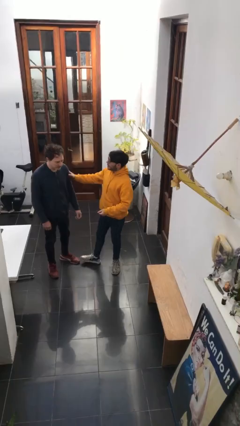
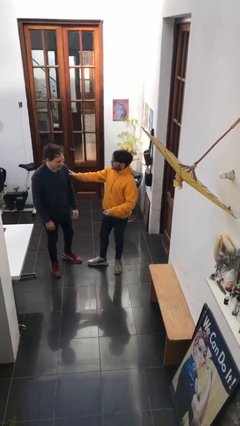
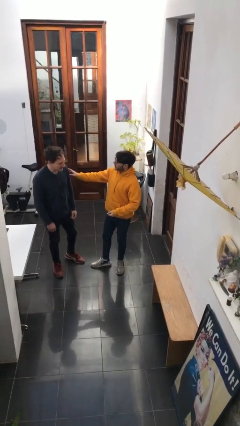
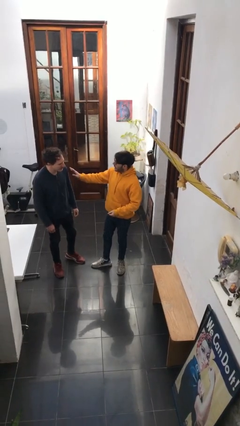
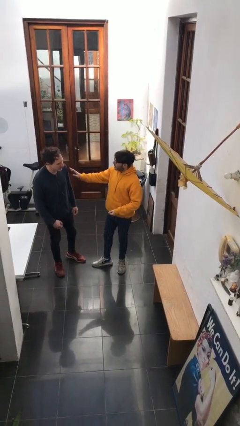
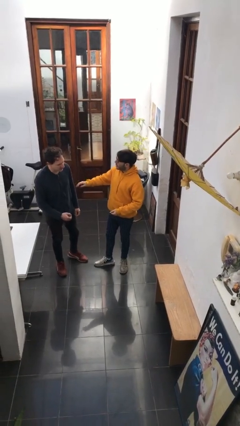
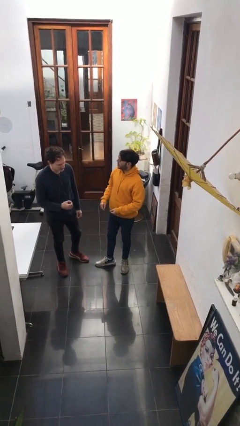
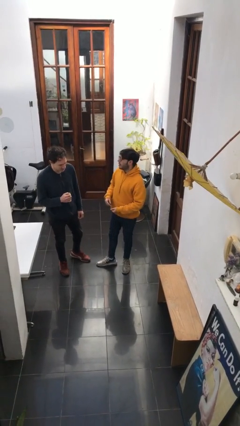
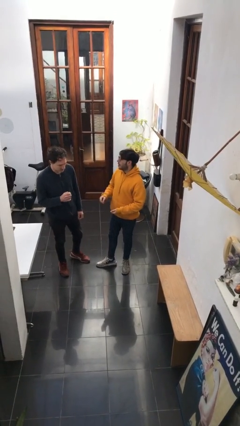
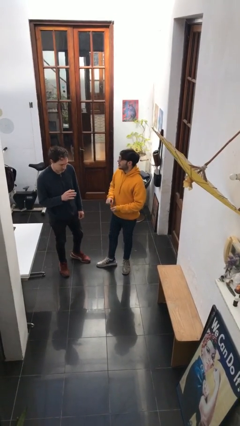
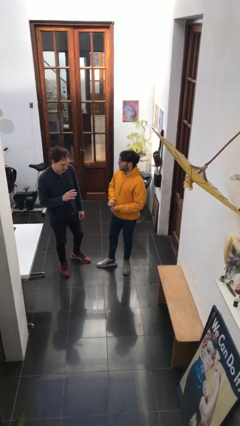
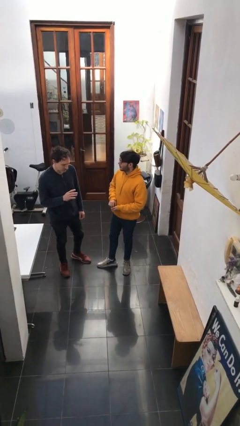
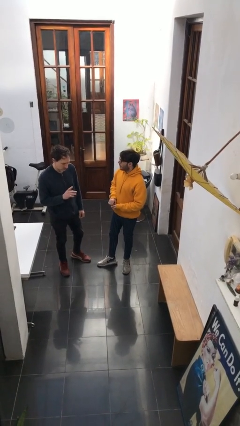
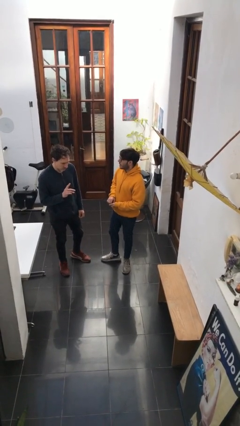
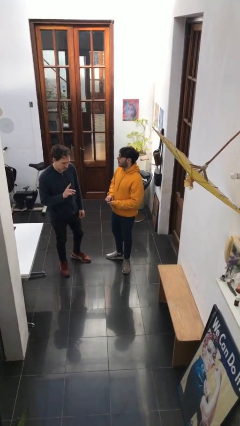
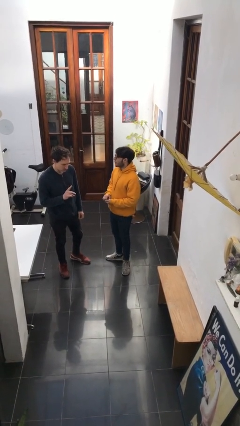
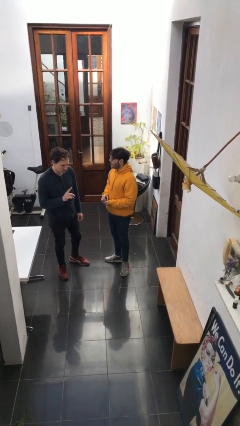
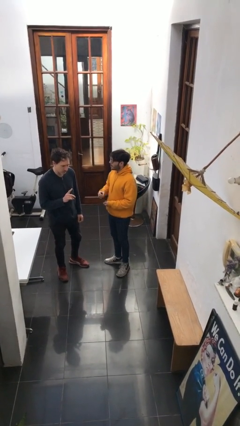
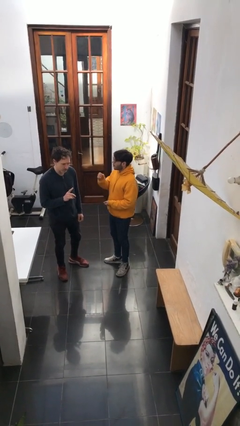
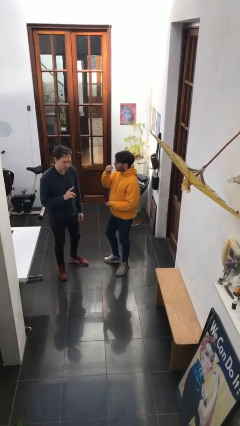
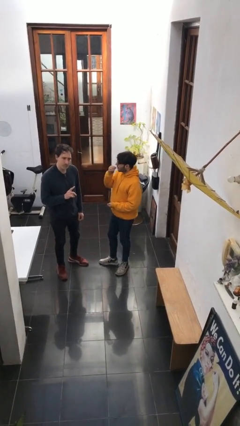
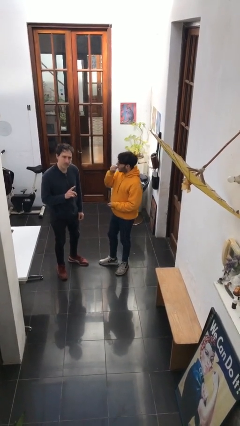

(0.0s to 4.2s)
person talks to person

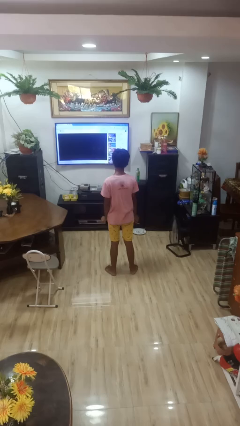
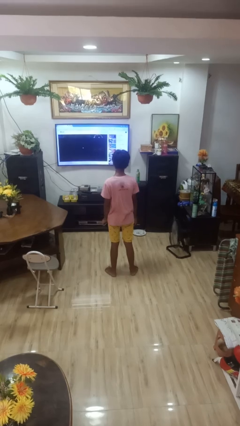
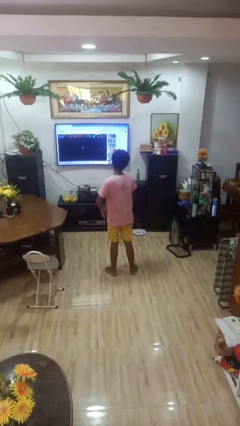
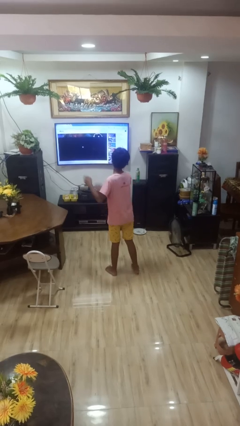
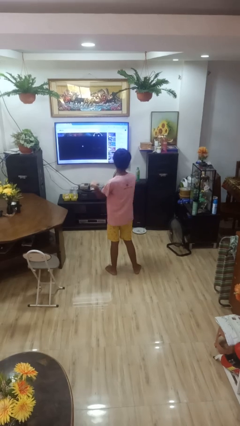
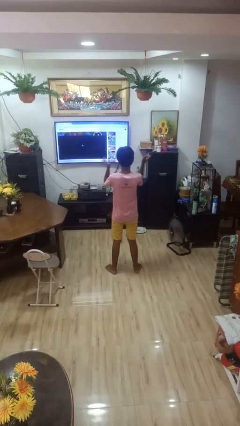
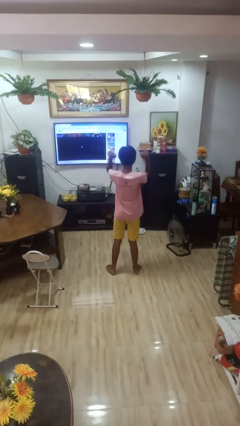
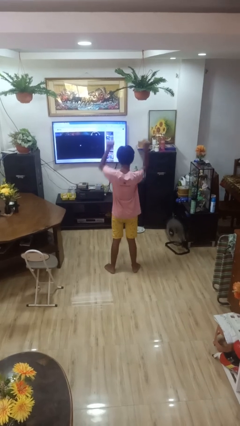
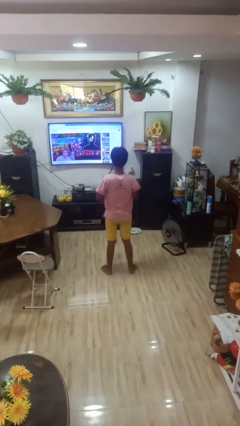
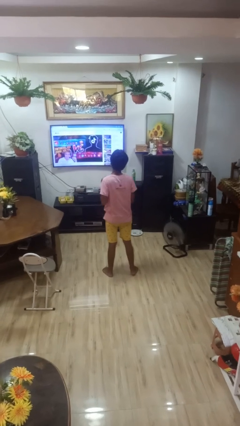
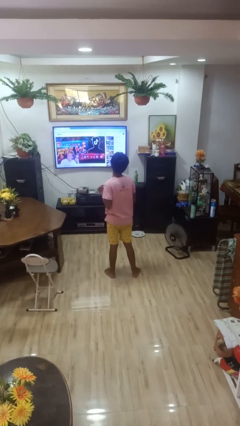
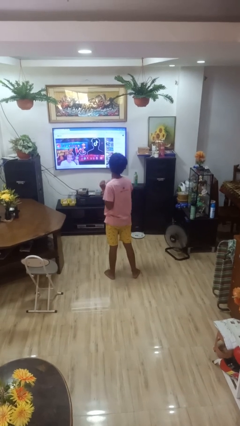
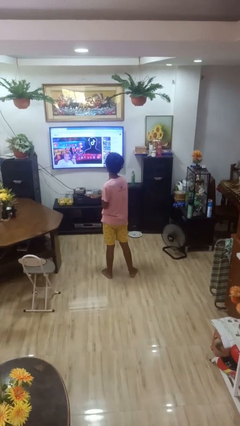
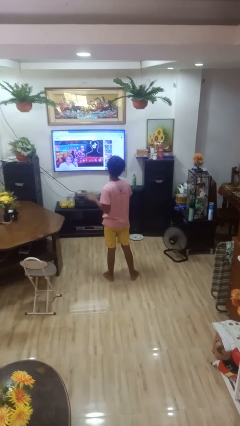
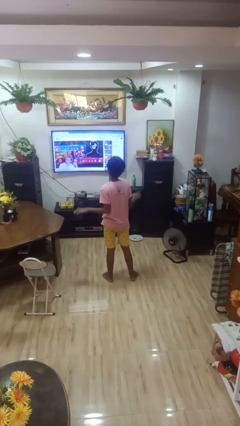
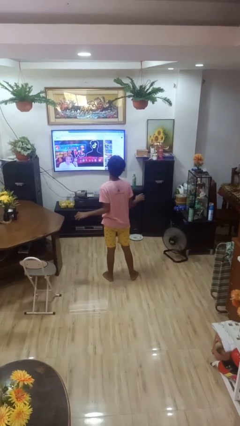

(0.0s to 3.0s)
person dances in place

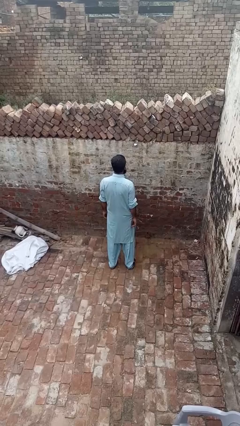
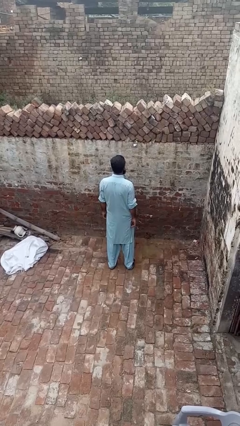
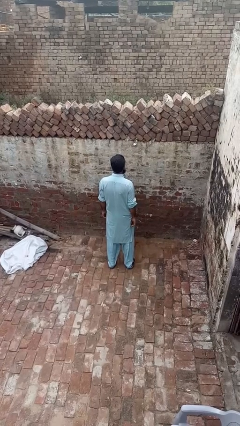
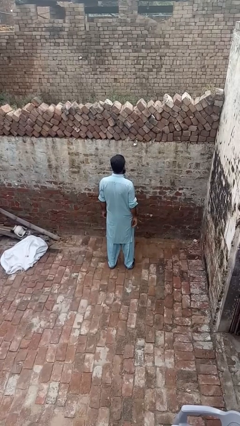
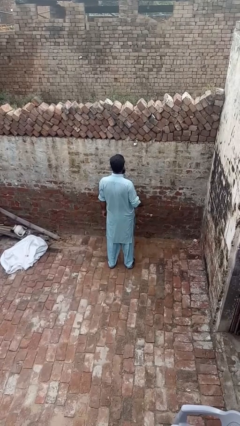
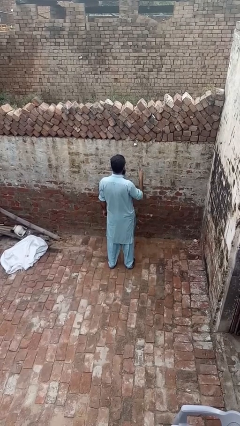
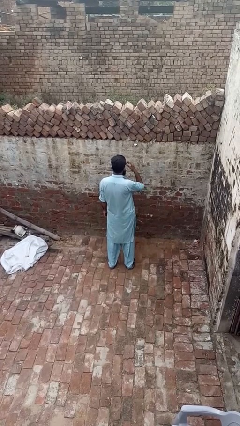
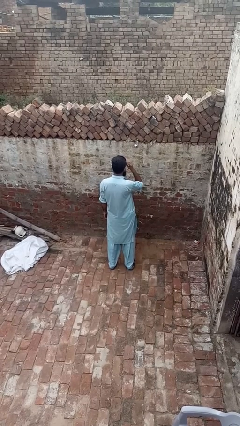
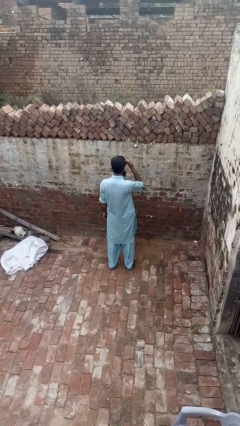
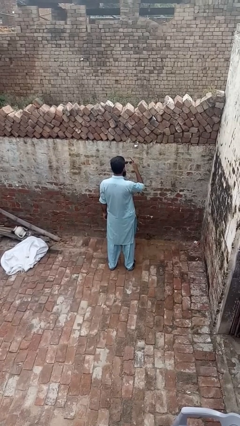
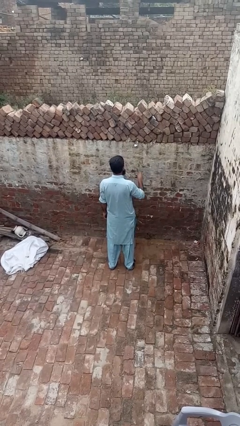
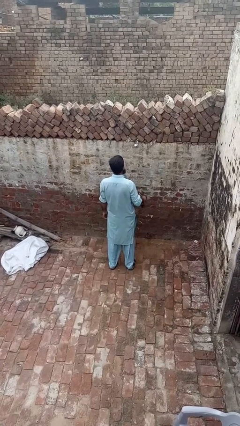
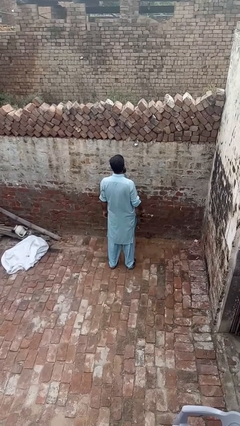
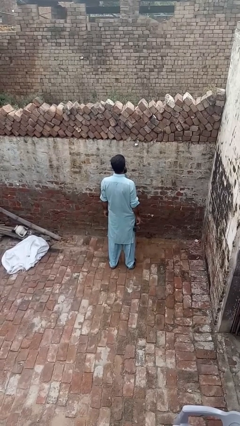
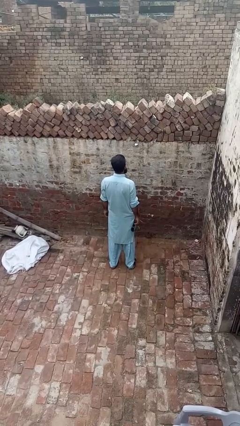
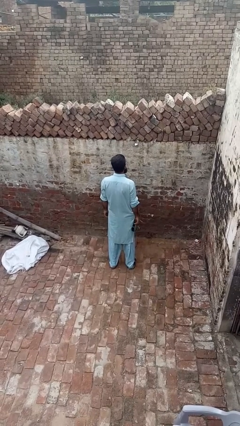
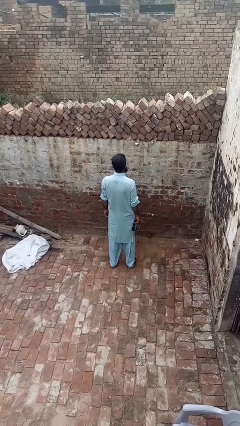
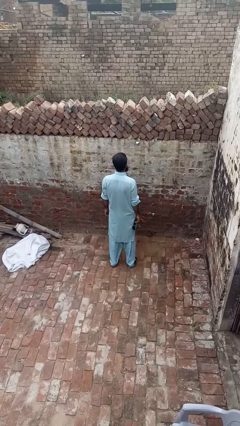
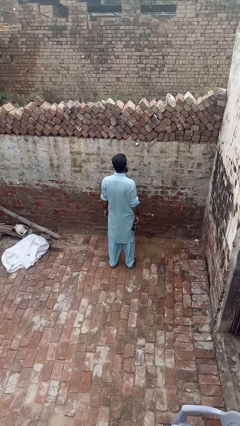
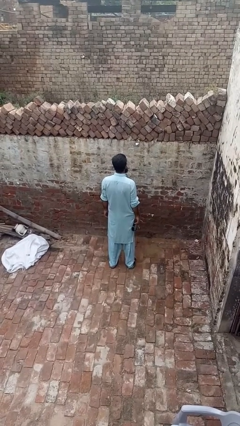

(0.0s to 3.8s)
person takes off sunglasses

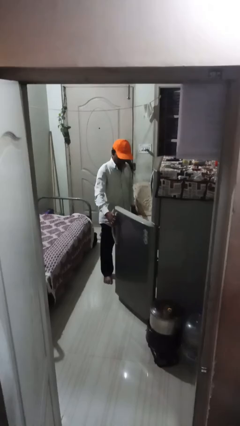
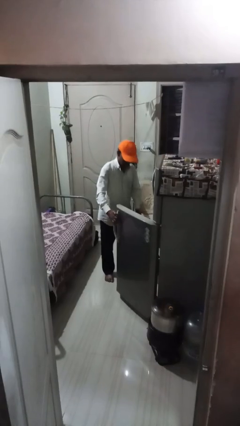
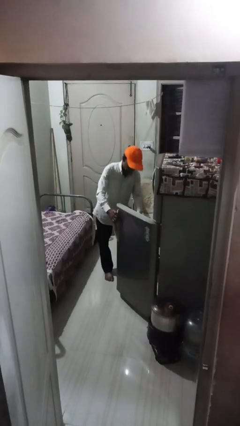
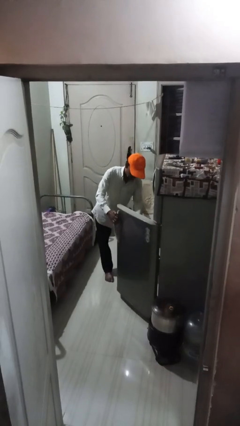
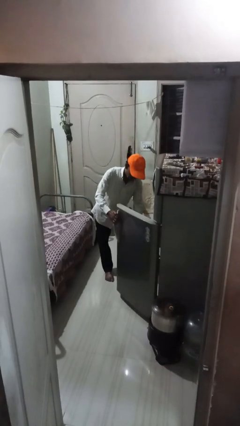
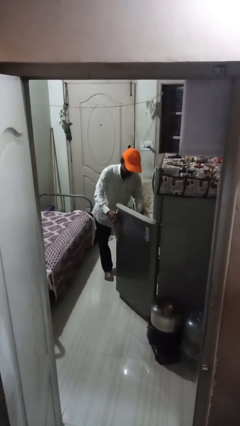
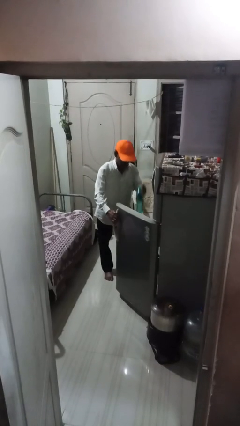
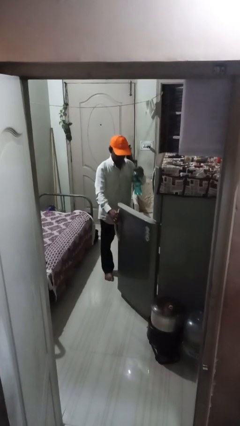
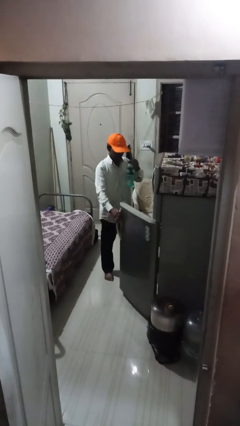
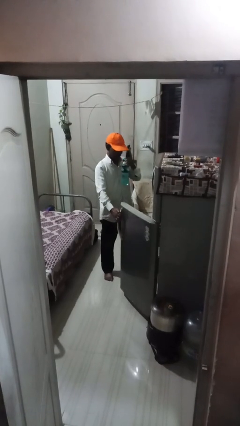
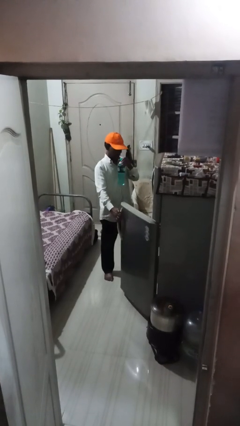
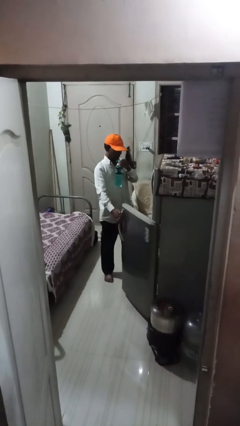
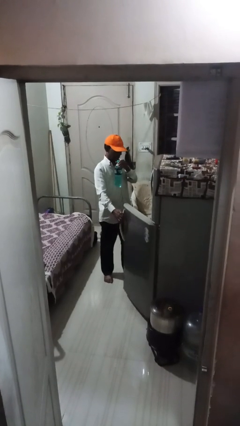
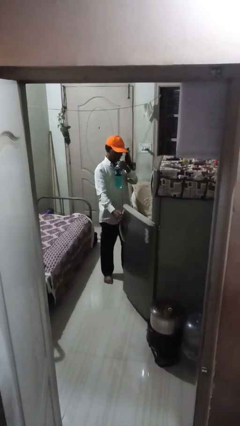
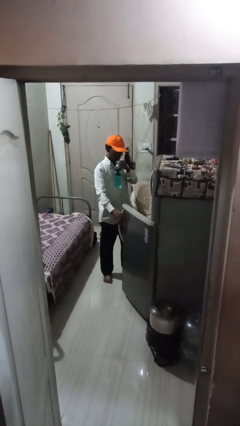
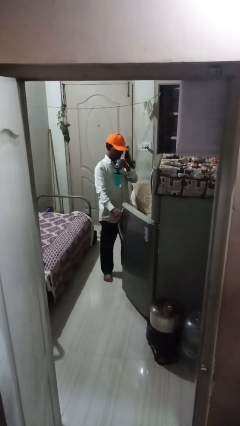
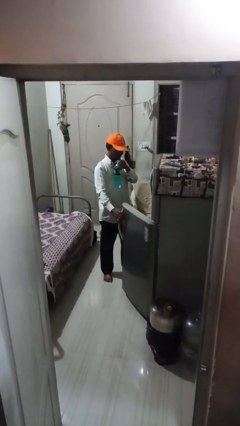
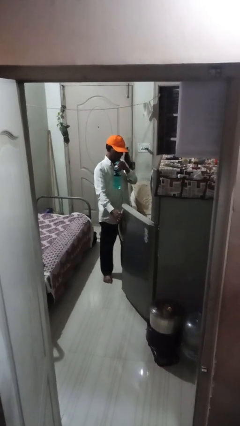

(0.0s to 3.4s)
person takes object from refrigerator

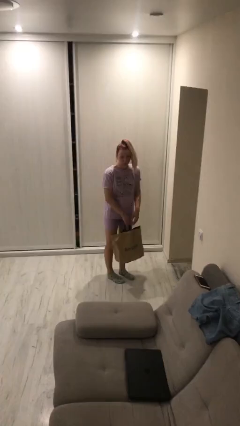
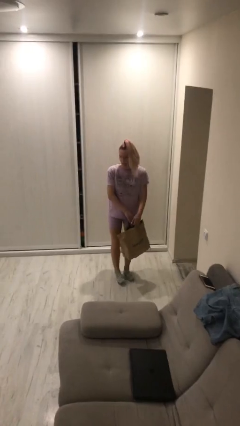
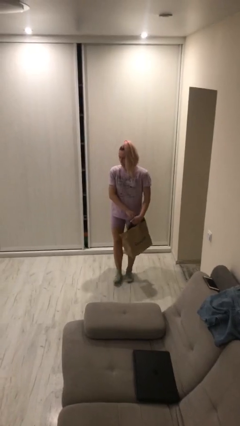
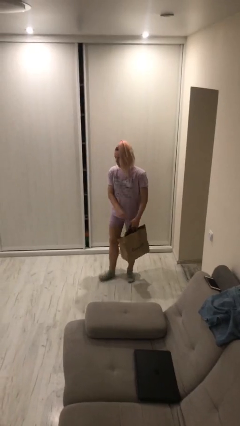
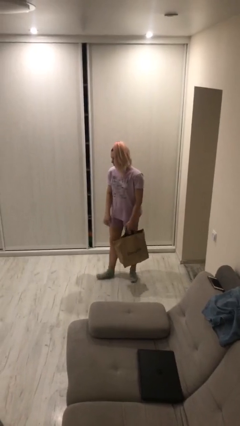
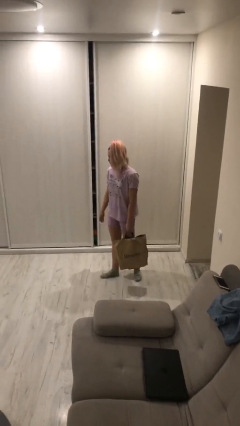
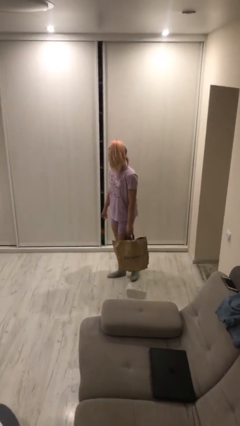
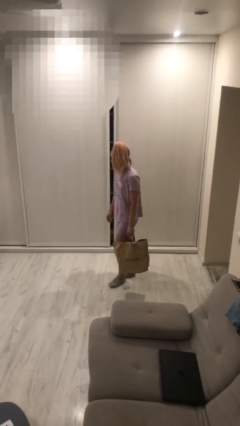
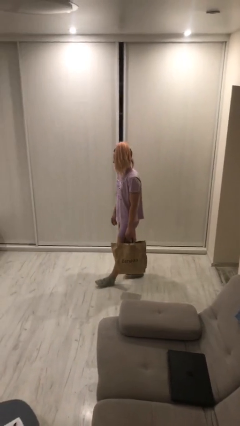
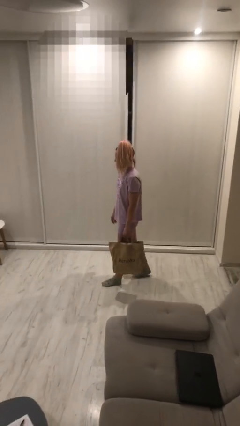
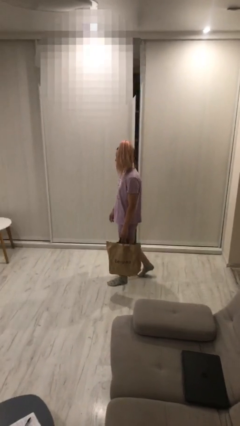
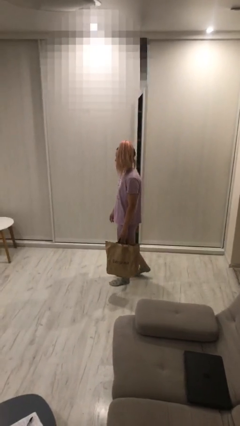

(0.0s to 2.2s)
person carries groceries

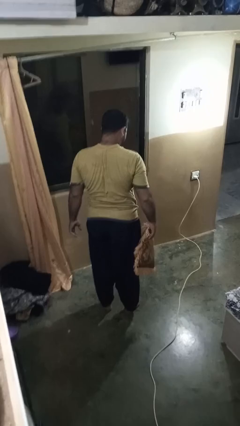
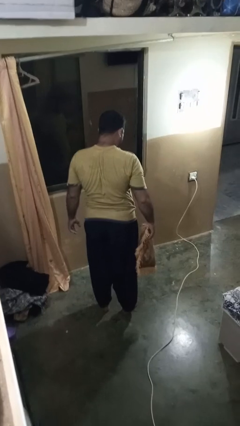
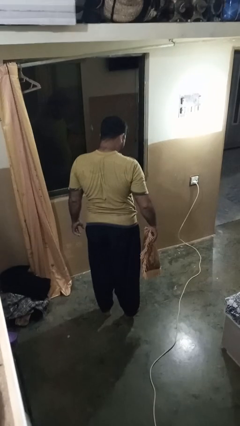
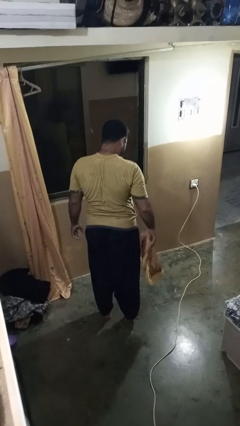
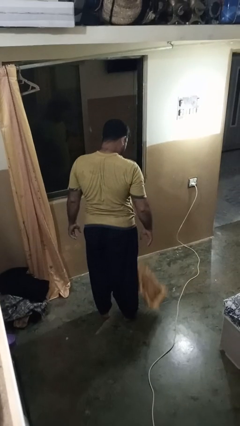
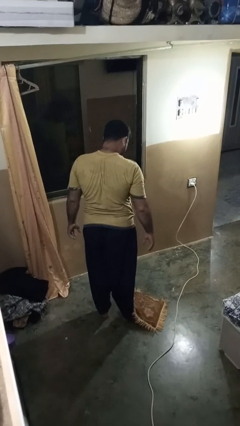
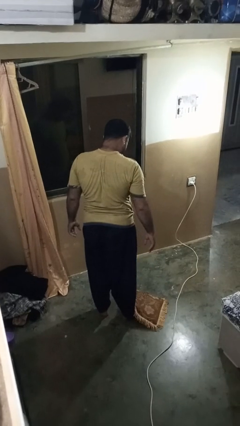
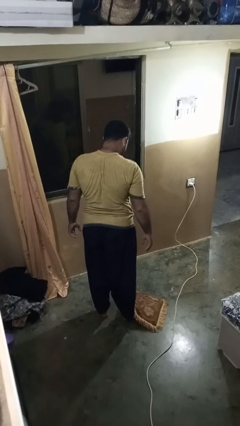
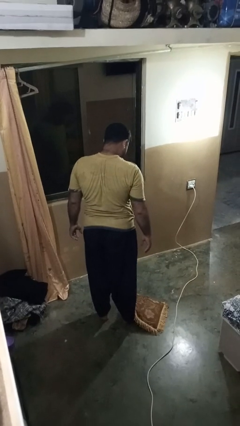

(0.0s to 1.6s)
person drops object
